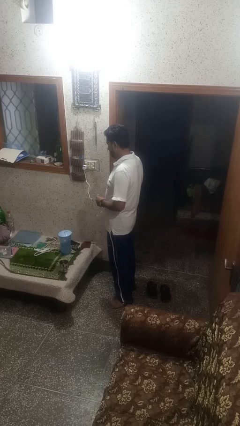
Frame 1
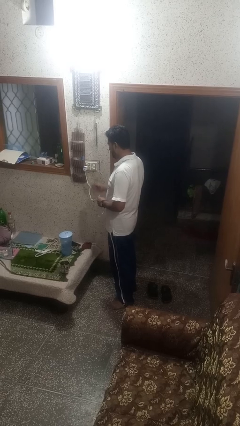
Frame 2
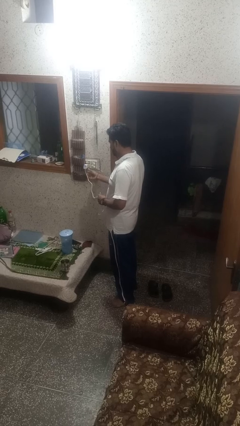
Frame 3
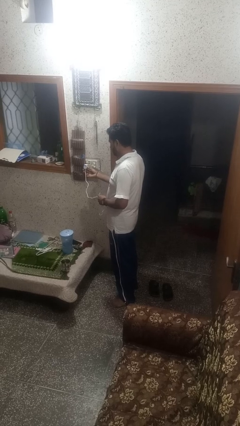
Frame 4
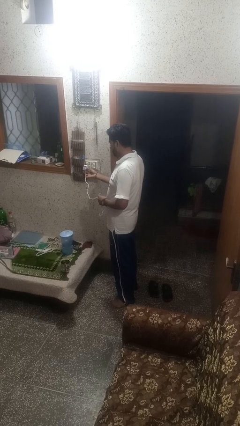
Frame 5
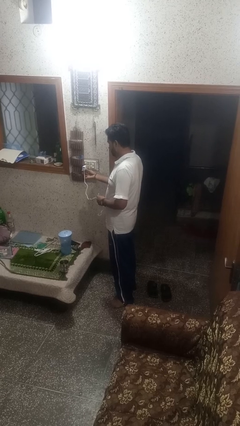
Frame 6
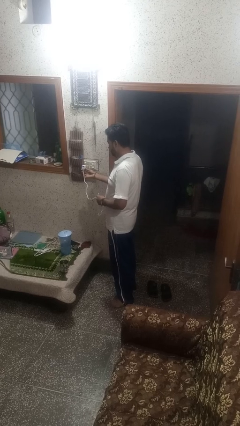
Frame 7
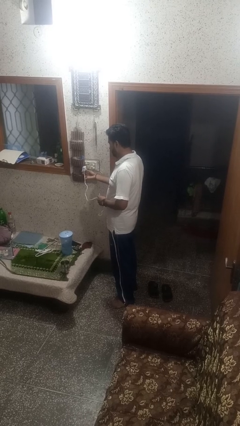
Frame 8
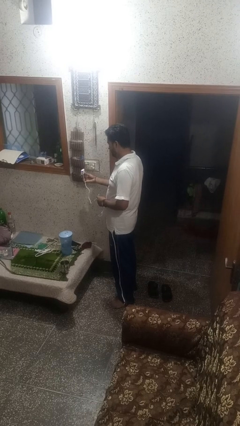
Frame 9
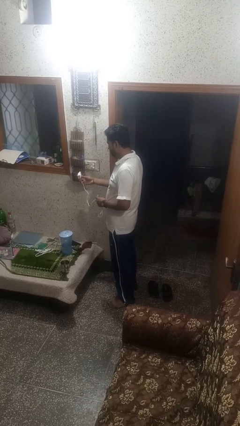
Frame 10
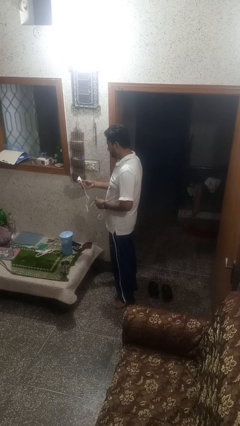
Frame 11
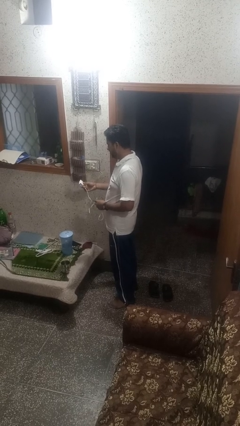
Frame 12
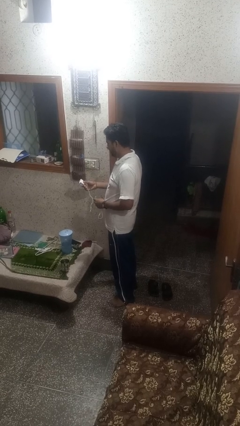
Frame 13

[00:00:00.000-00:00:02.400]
person unplugs from electrical socket

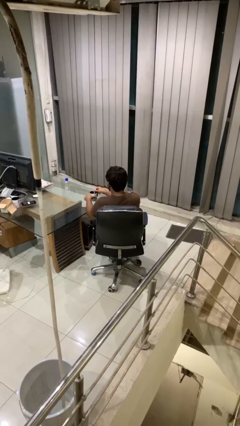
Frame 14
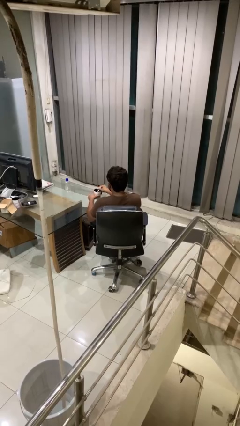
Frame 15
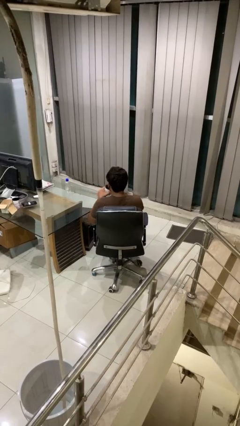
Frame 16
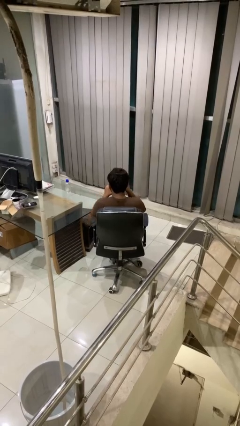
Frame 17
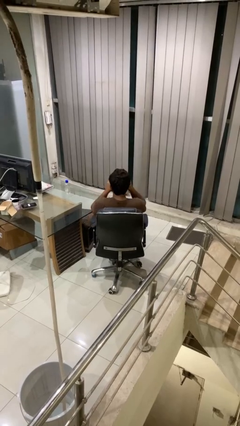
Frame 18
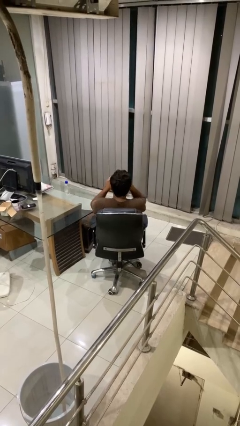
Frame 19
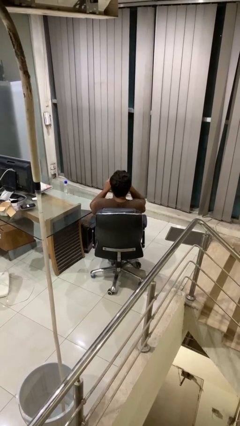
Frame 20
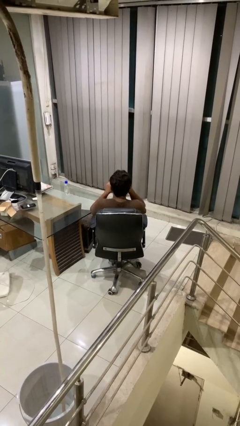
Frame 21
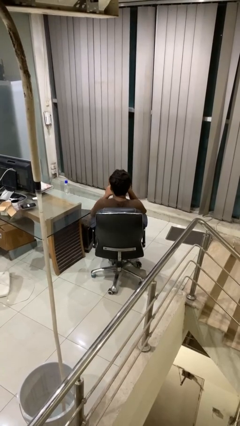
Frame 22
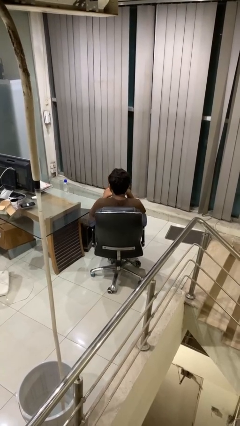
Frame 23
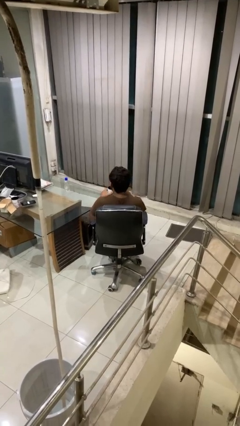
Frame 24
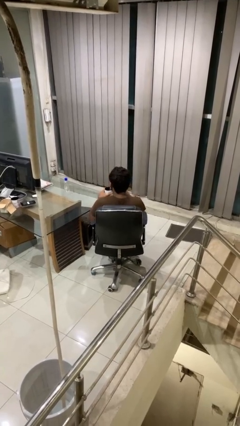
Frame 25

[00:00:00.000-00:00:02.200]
person drinks from mug

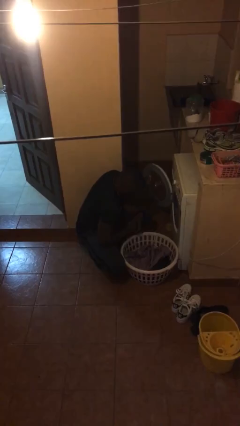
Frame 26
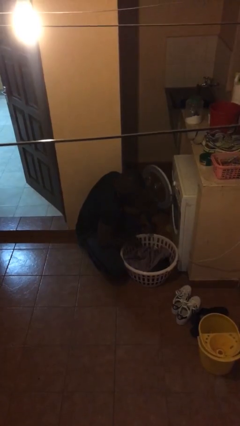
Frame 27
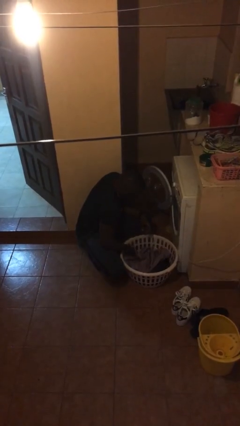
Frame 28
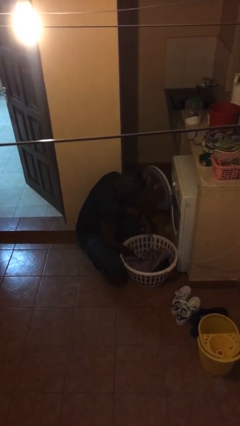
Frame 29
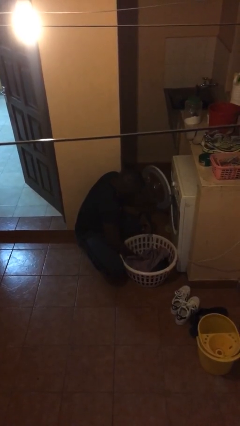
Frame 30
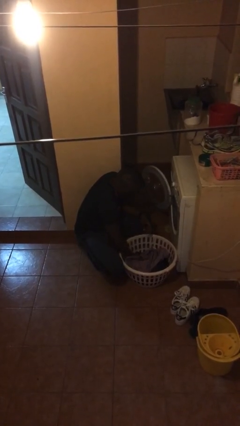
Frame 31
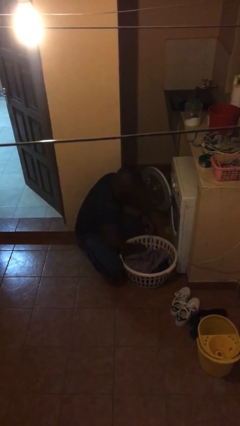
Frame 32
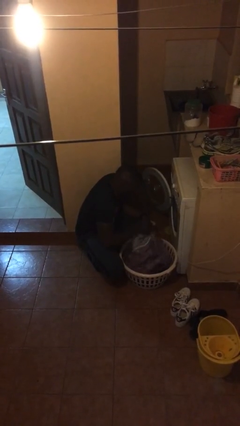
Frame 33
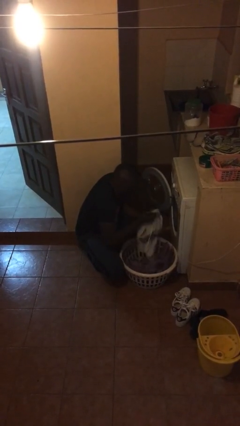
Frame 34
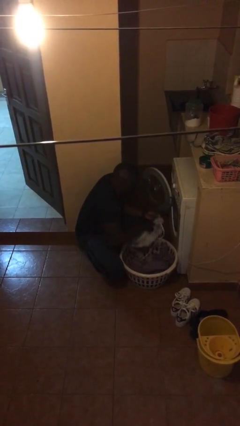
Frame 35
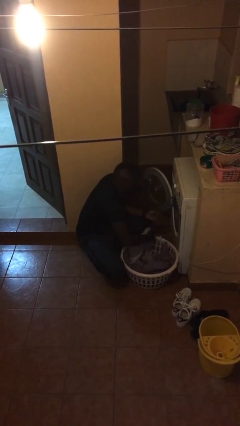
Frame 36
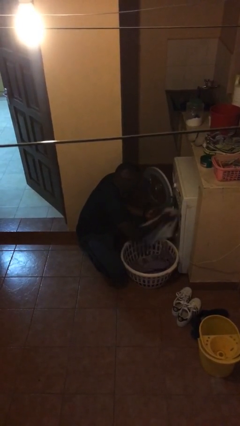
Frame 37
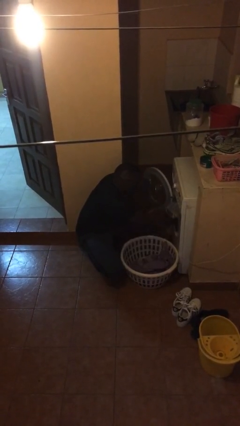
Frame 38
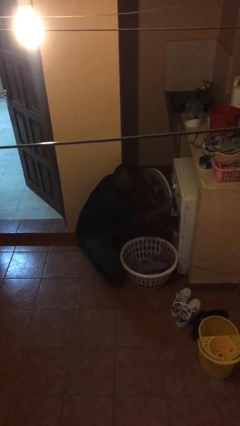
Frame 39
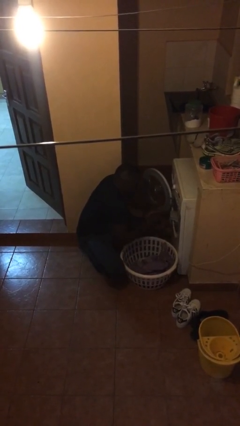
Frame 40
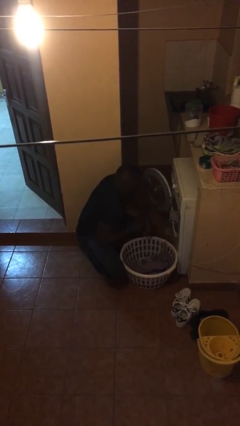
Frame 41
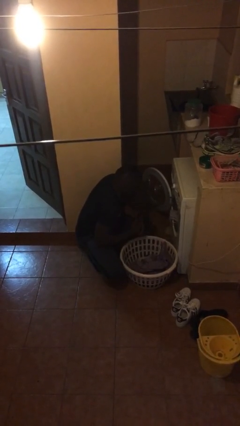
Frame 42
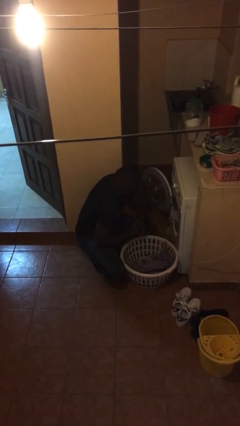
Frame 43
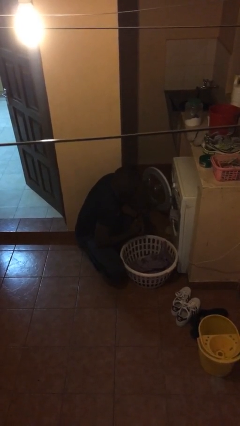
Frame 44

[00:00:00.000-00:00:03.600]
person loads clotheswasher

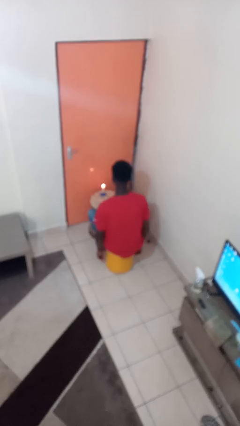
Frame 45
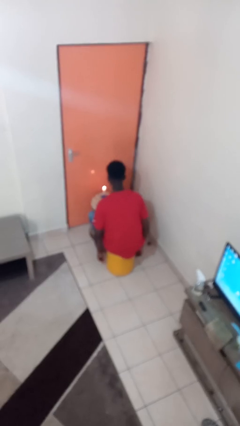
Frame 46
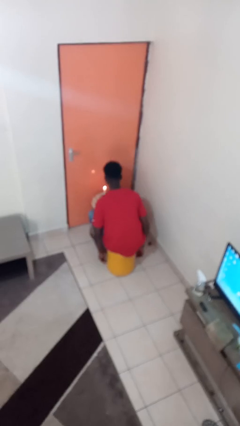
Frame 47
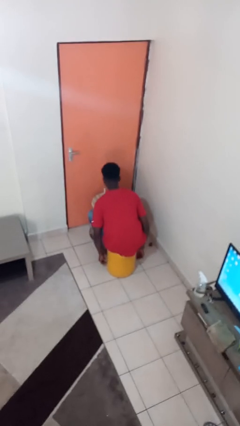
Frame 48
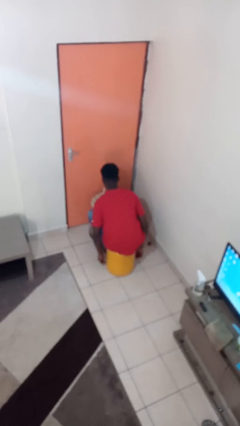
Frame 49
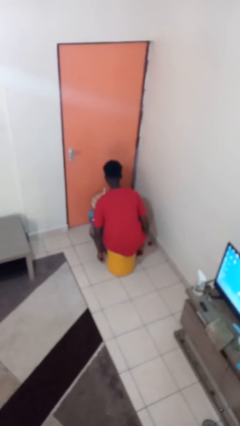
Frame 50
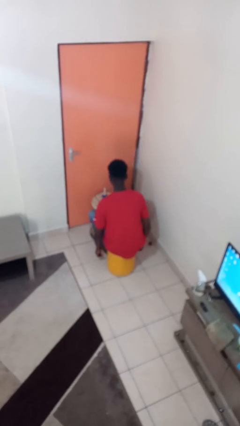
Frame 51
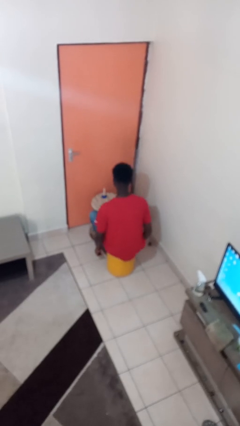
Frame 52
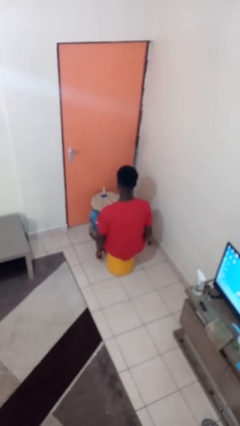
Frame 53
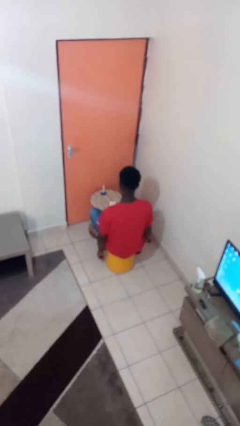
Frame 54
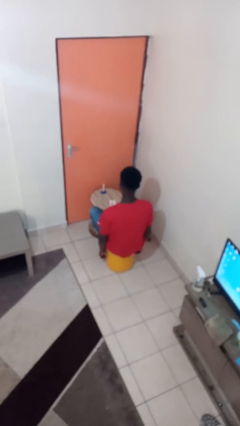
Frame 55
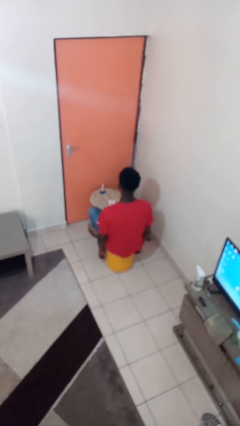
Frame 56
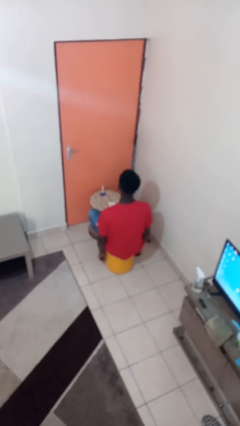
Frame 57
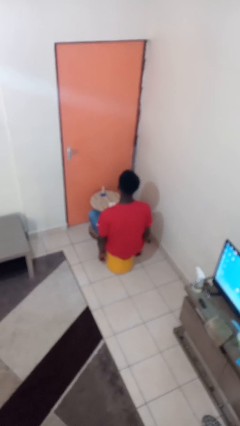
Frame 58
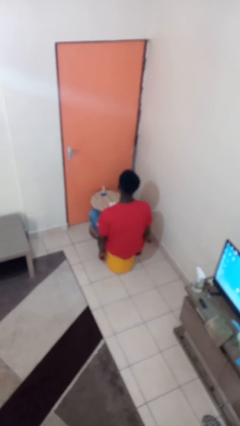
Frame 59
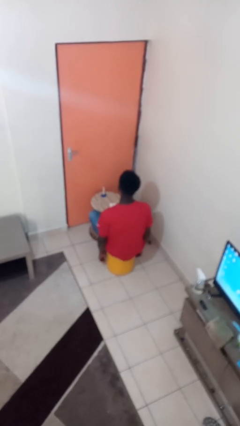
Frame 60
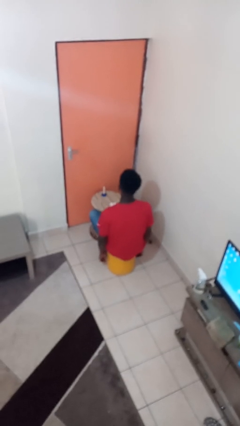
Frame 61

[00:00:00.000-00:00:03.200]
person extinguishes candle

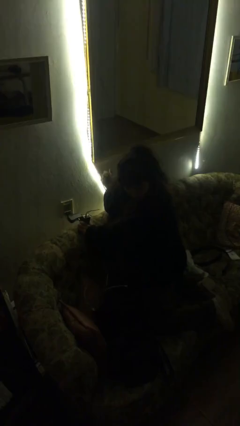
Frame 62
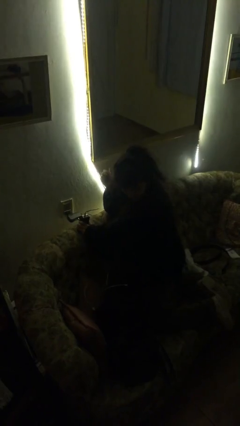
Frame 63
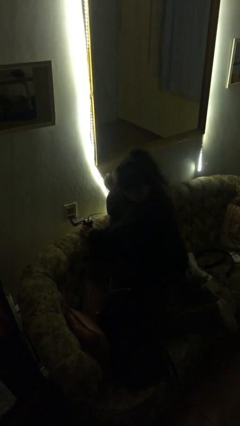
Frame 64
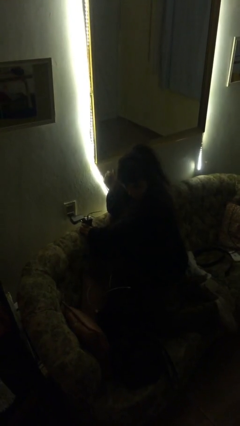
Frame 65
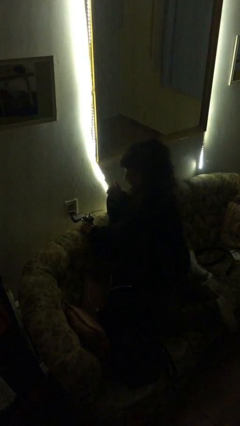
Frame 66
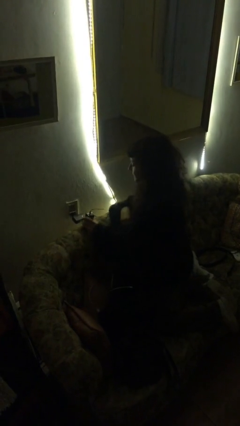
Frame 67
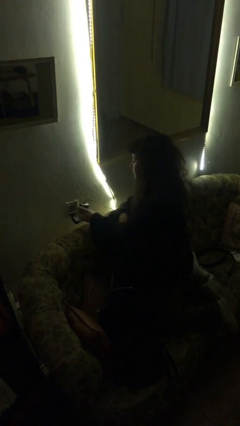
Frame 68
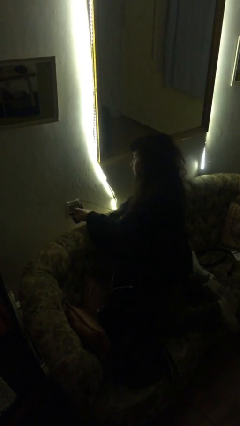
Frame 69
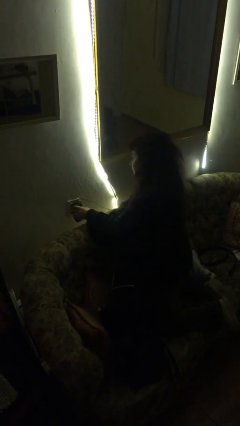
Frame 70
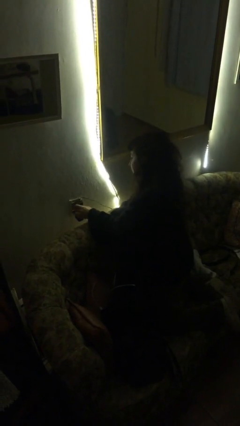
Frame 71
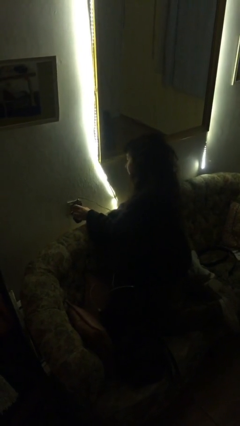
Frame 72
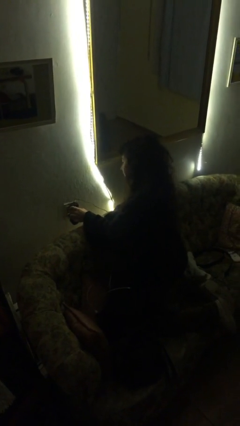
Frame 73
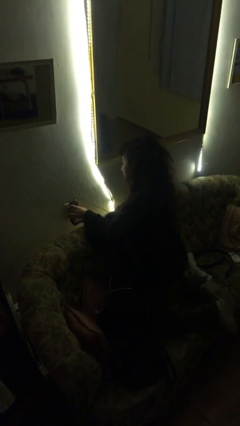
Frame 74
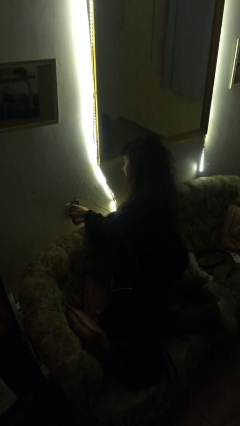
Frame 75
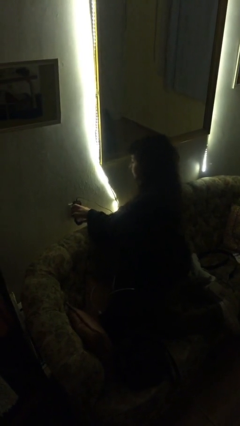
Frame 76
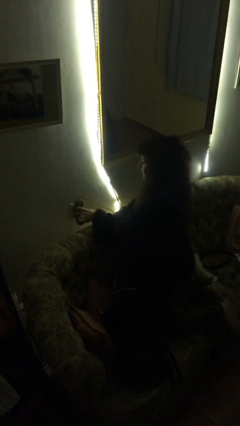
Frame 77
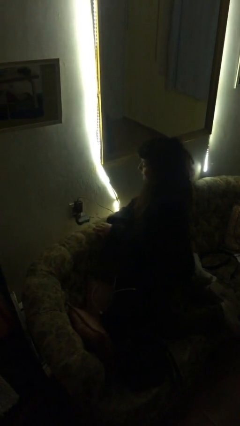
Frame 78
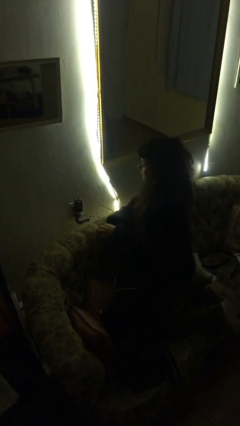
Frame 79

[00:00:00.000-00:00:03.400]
person plugs into electrical socket

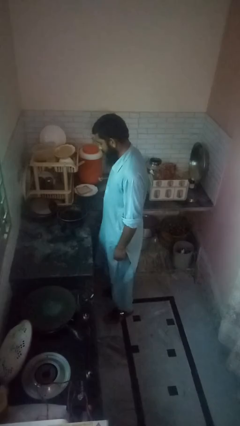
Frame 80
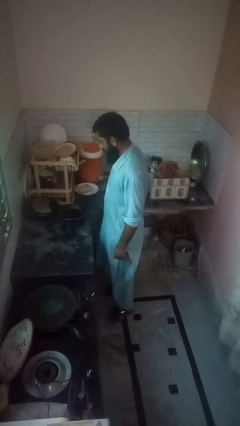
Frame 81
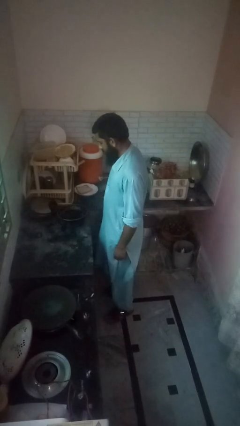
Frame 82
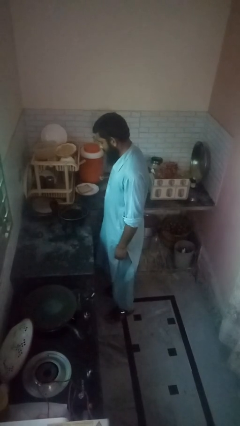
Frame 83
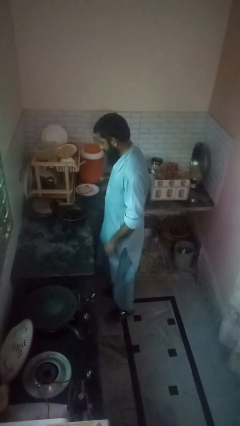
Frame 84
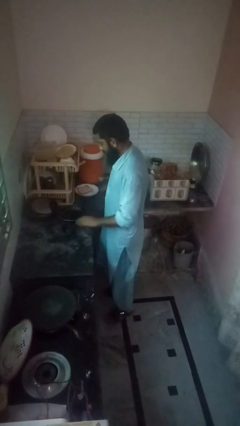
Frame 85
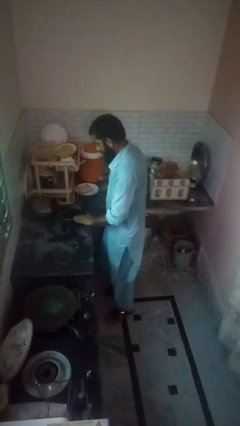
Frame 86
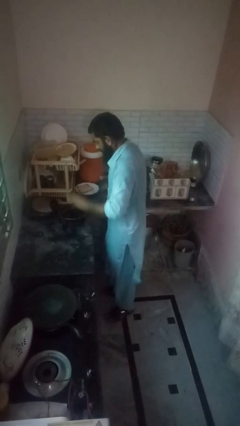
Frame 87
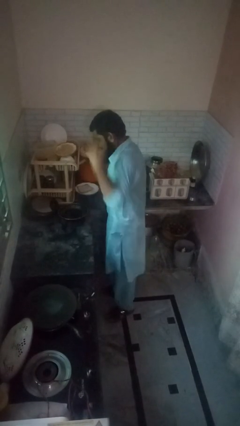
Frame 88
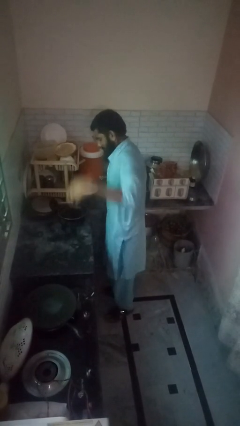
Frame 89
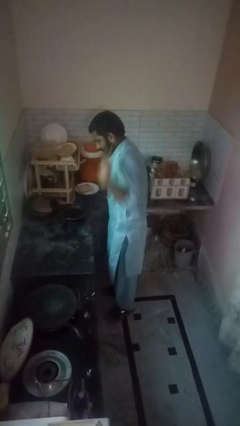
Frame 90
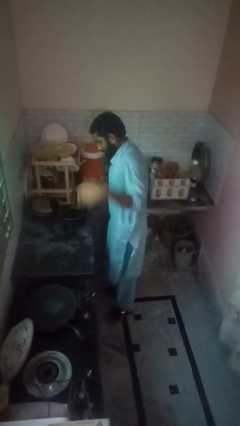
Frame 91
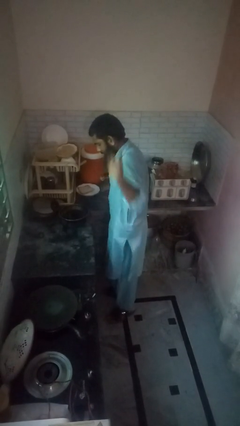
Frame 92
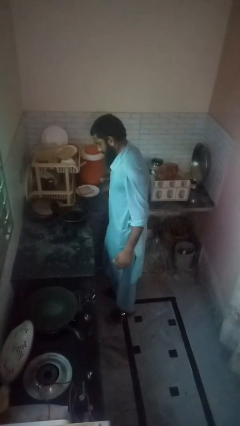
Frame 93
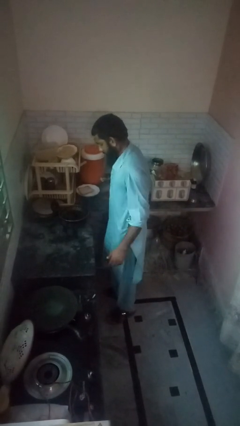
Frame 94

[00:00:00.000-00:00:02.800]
person burns hand
